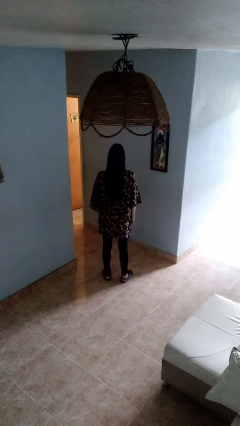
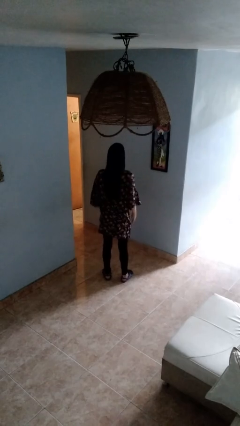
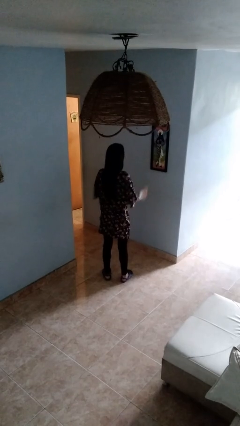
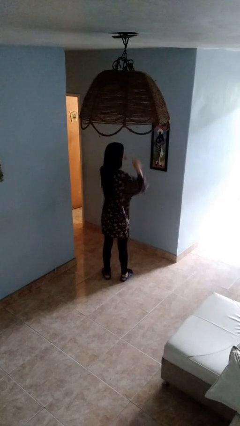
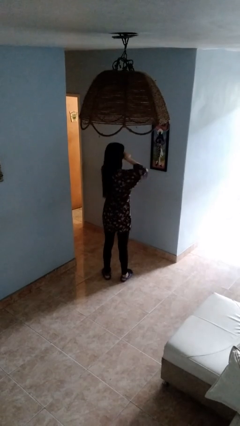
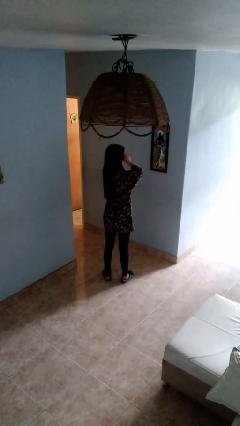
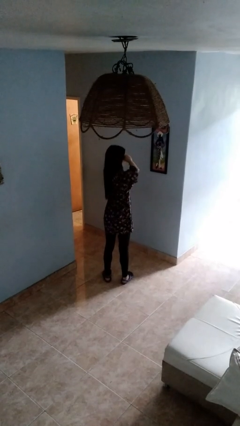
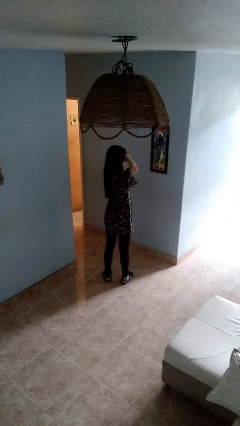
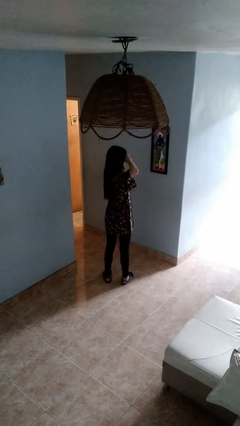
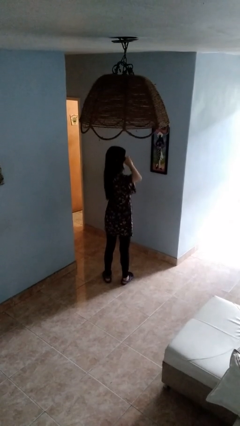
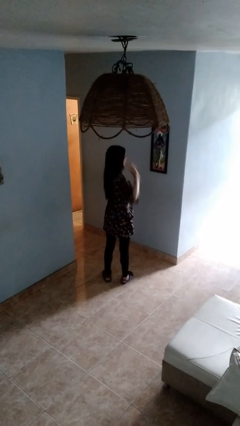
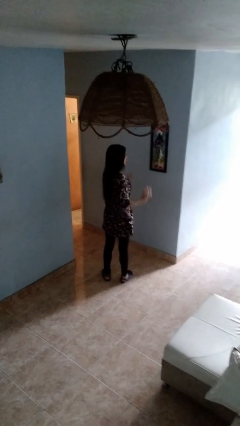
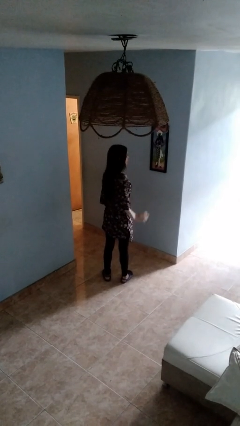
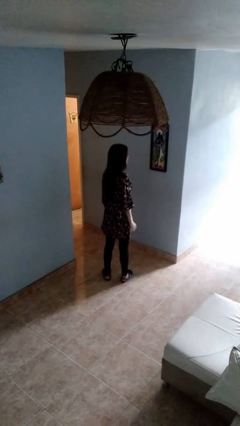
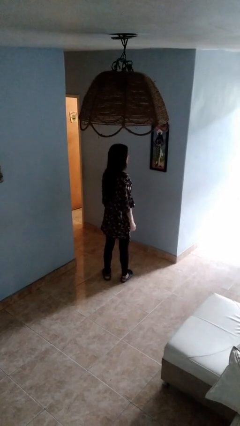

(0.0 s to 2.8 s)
person rubs eyes

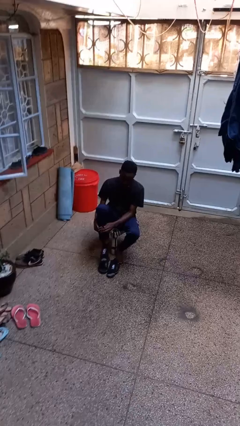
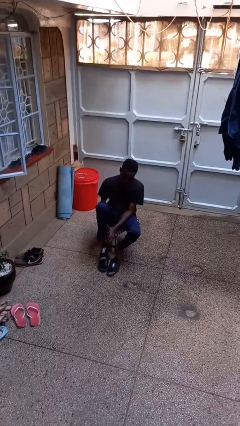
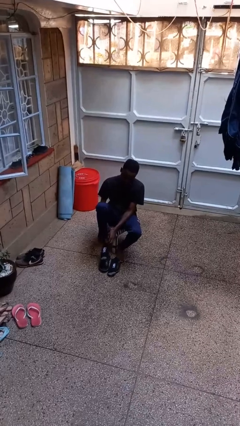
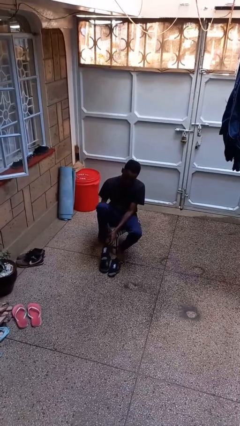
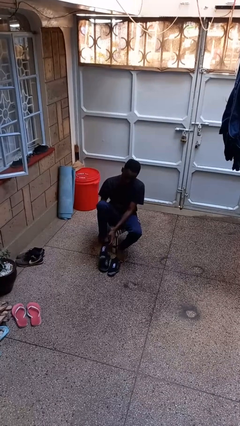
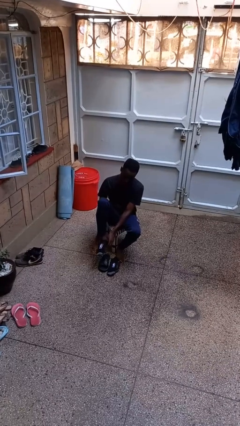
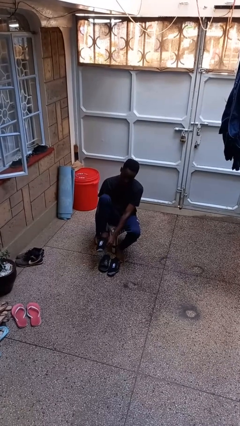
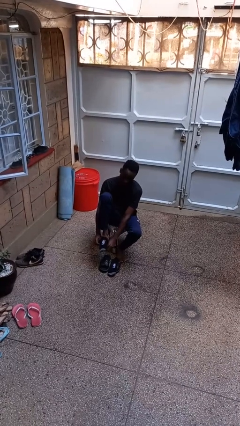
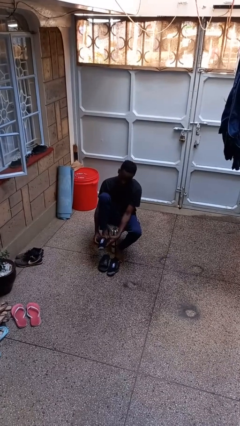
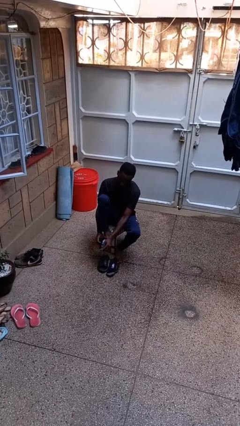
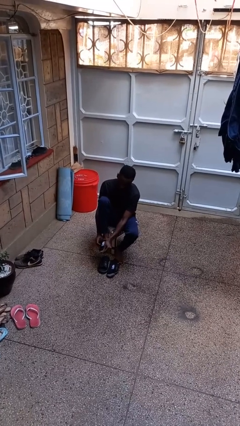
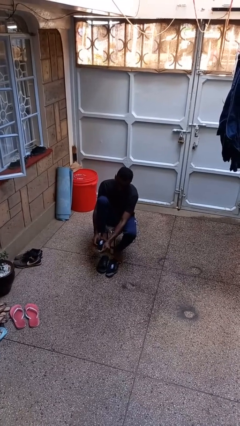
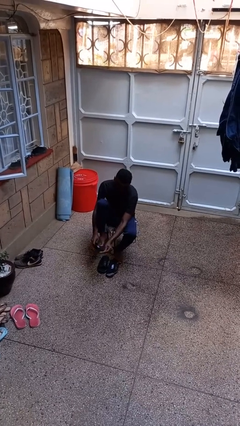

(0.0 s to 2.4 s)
person takes off socks

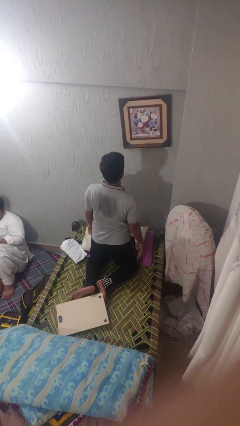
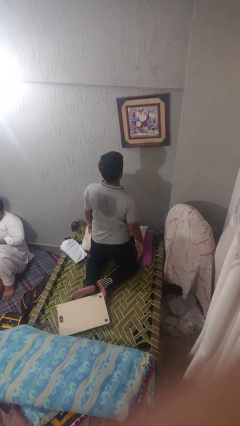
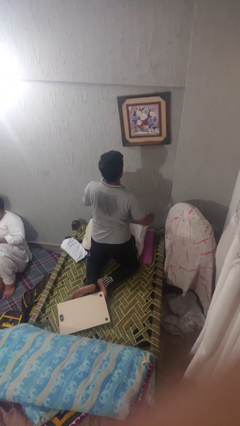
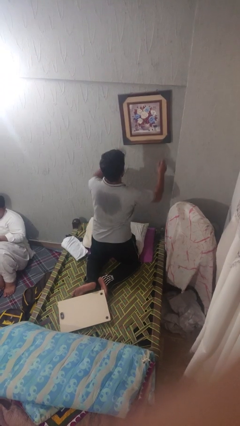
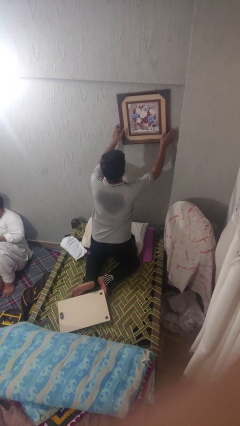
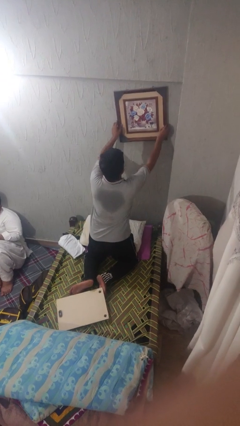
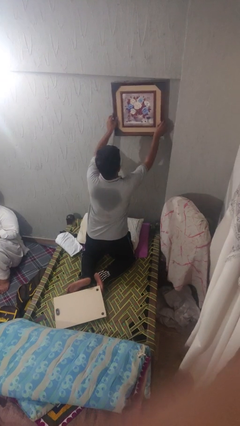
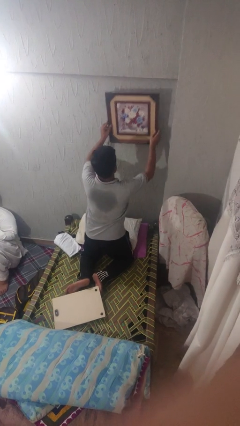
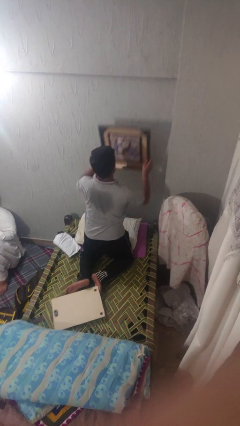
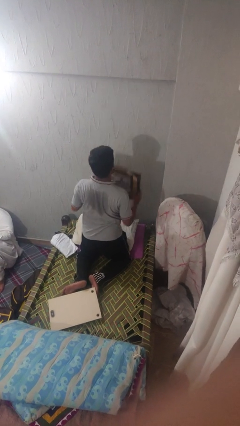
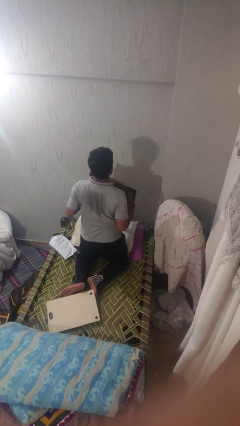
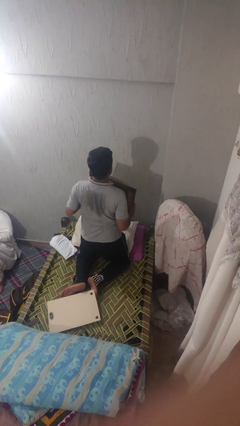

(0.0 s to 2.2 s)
person takes down picture frame

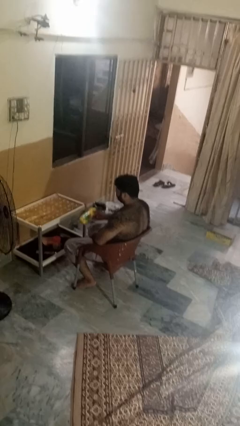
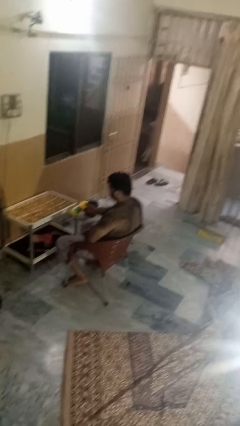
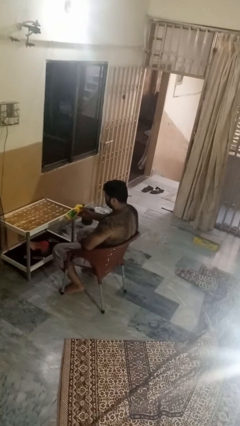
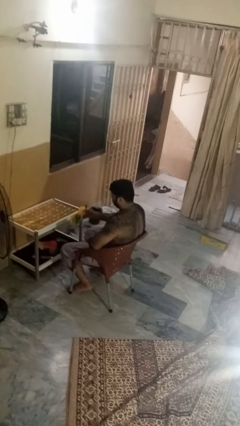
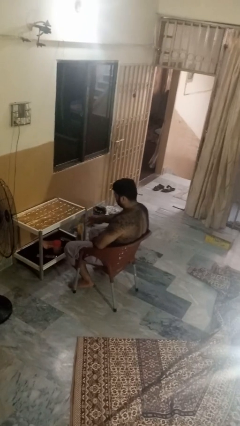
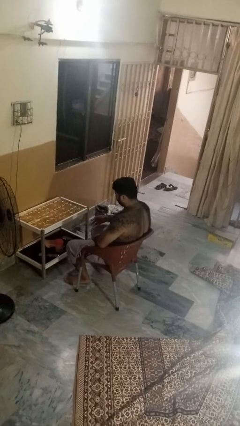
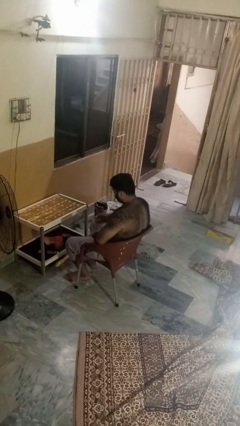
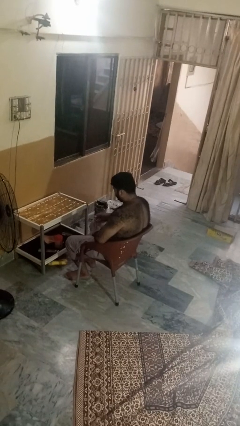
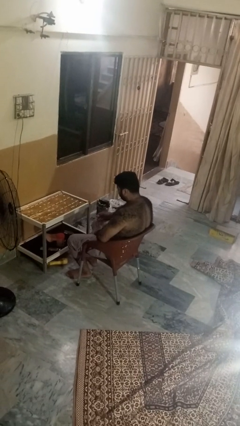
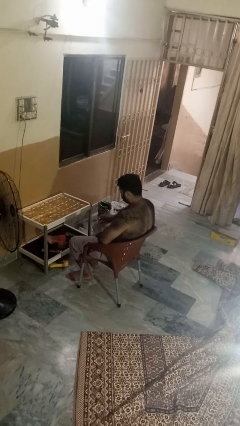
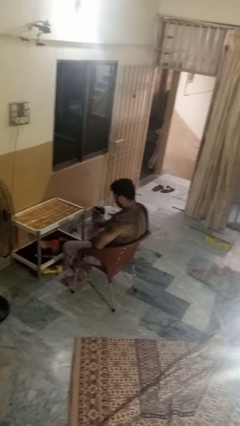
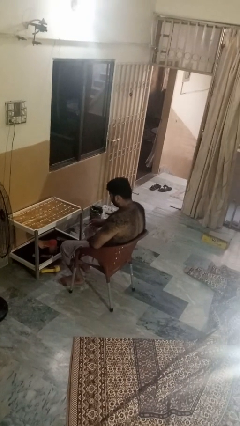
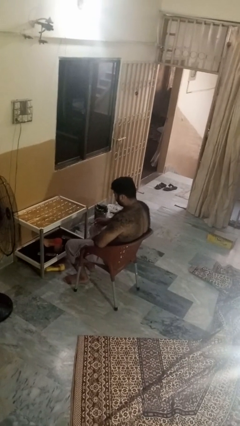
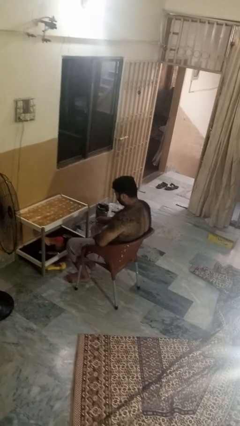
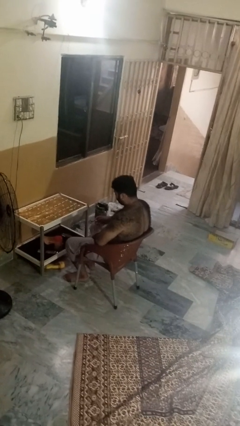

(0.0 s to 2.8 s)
person throws object to ground

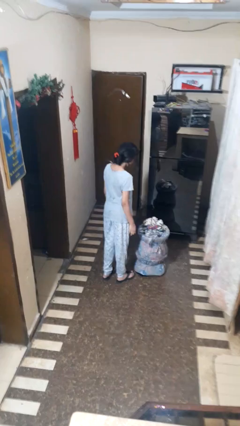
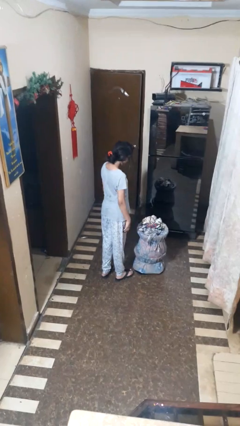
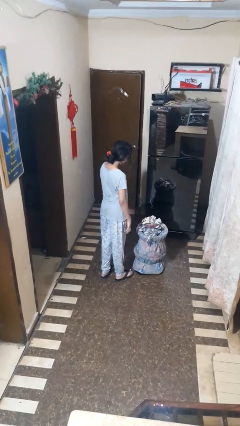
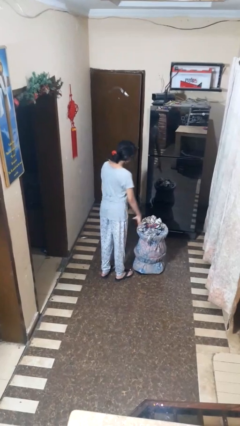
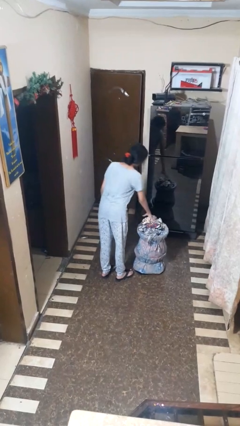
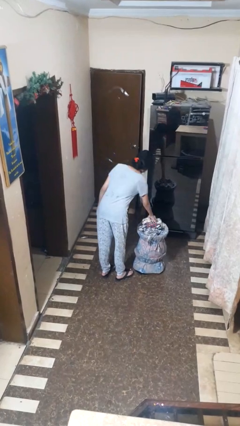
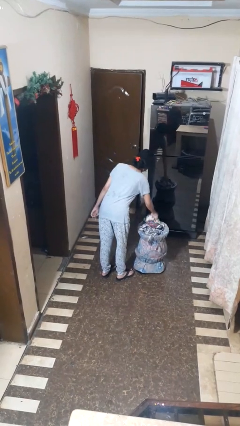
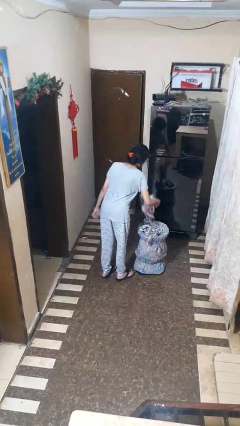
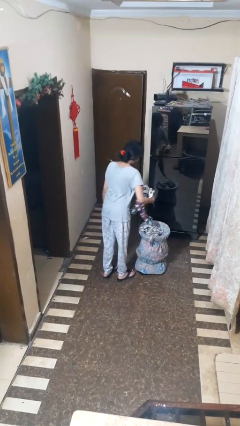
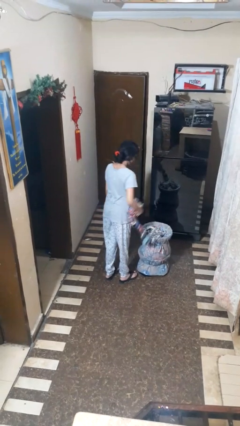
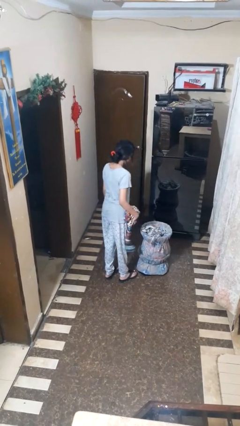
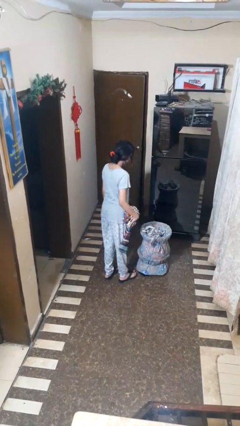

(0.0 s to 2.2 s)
person takes object from basket

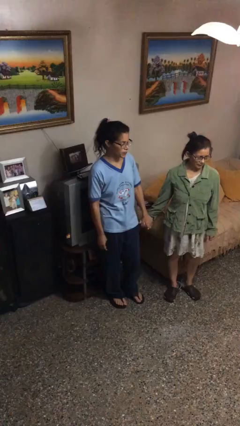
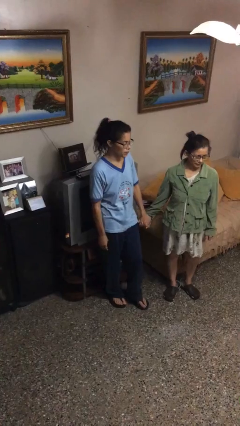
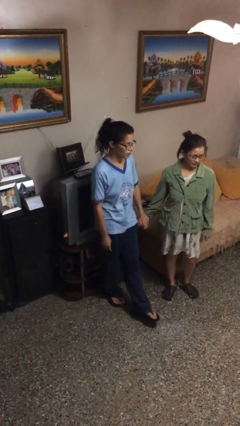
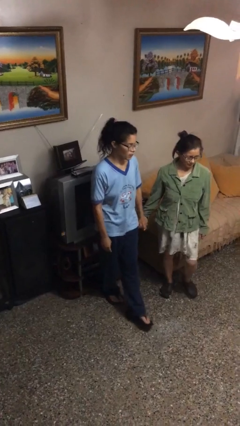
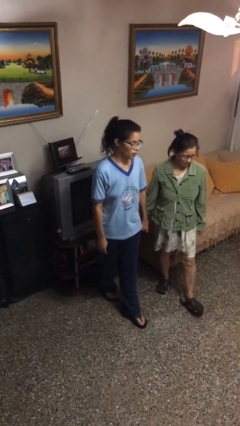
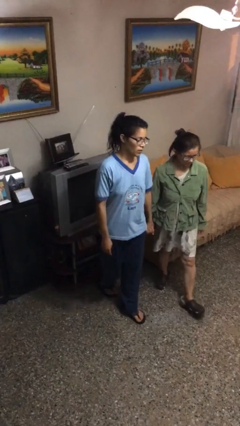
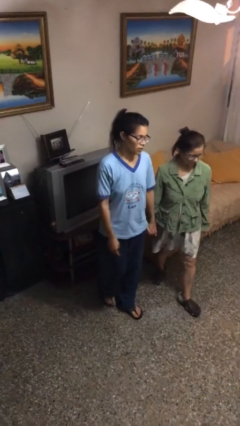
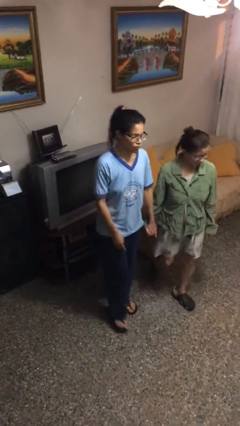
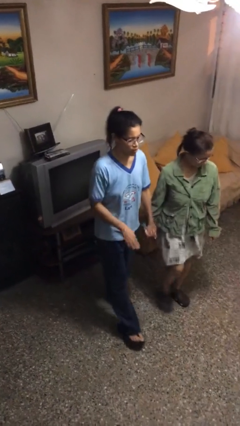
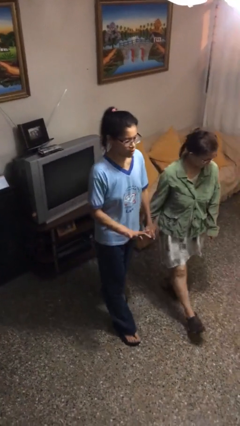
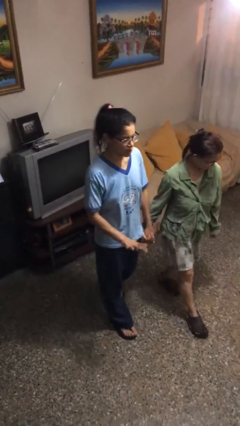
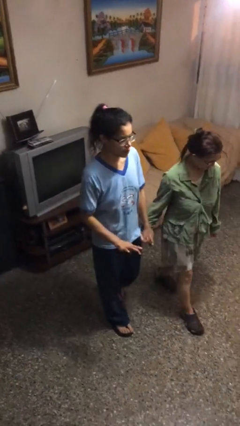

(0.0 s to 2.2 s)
person holds hand

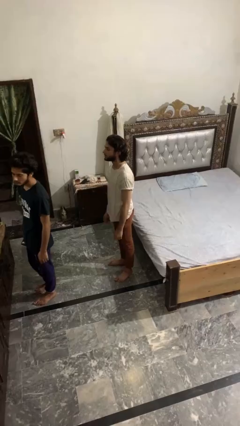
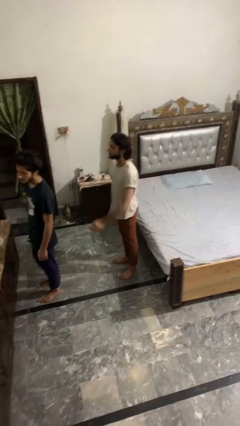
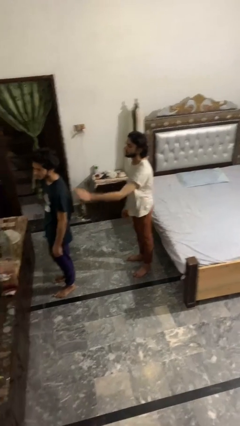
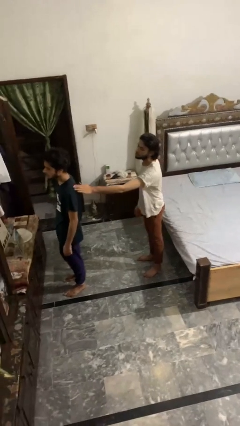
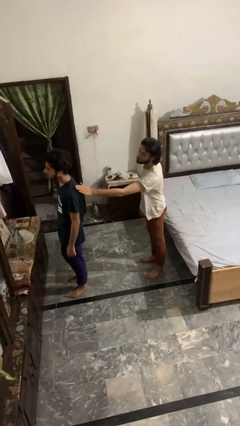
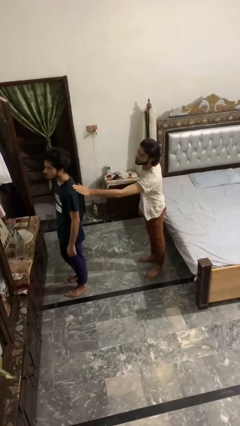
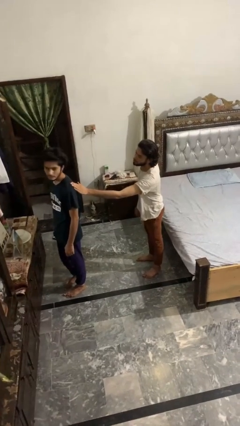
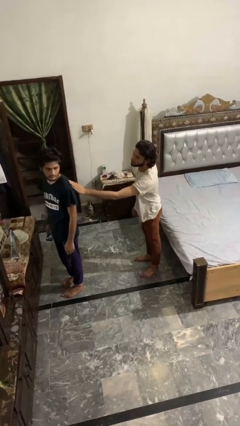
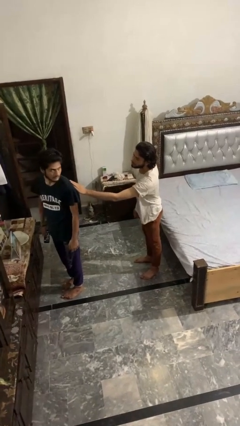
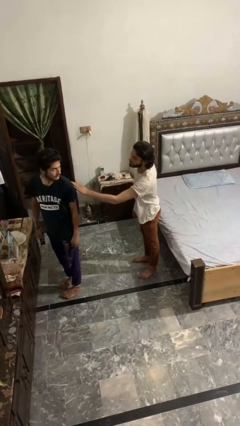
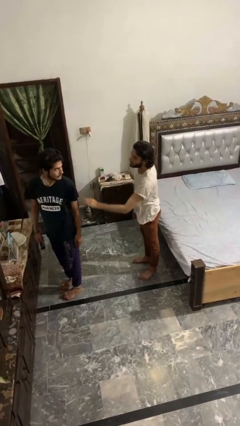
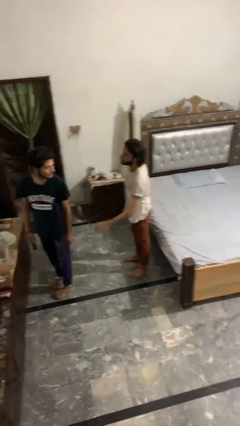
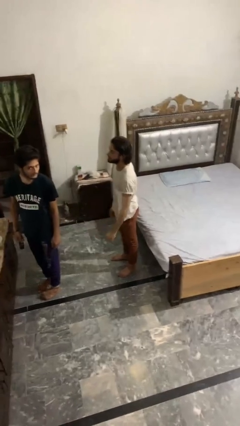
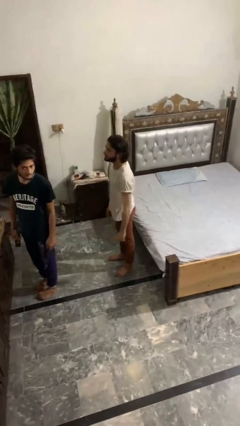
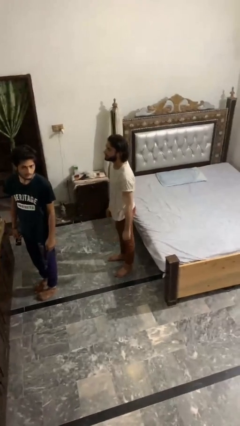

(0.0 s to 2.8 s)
person touches back of person
